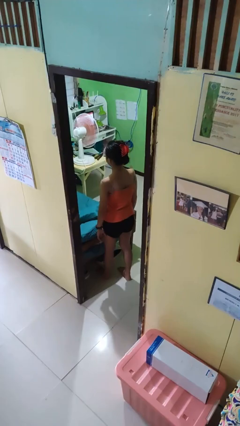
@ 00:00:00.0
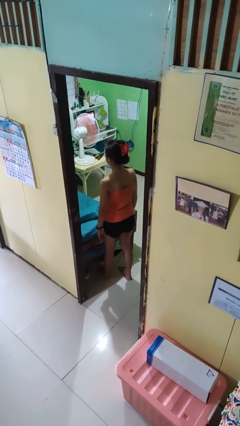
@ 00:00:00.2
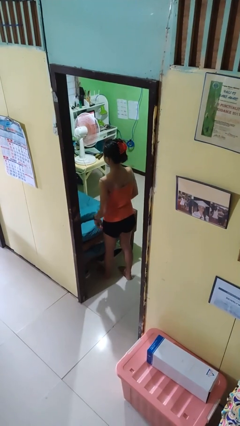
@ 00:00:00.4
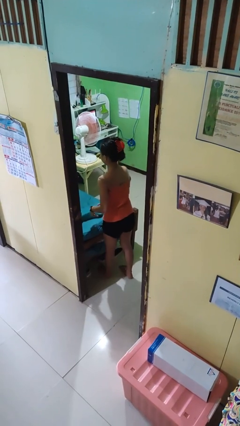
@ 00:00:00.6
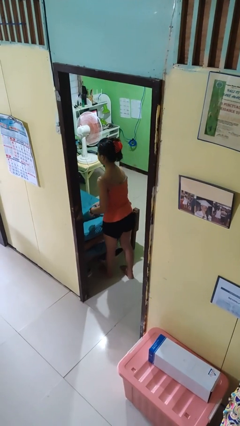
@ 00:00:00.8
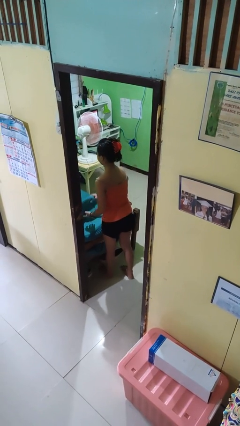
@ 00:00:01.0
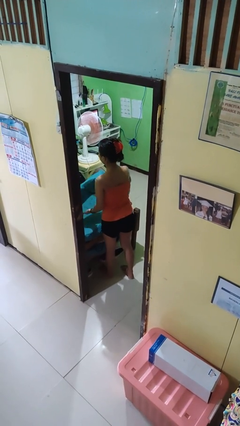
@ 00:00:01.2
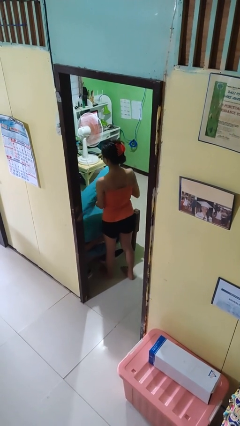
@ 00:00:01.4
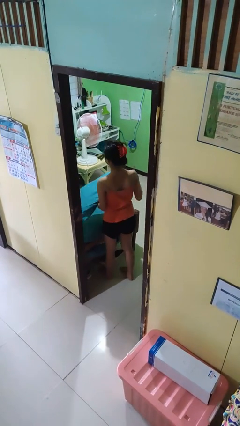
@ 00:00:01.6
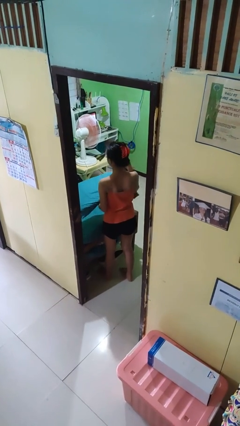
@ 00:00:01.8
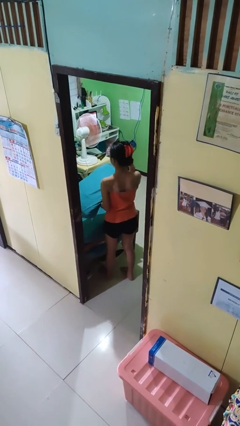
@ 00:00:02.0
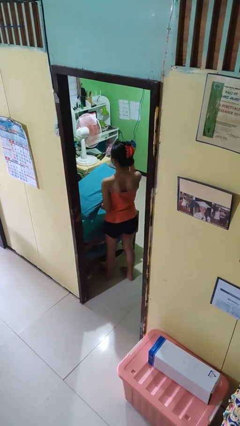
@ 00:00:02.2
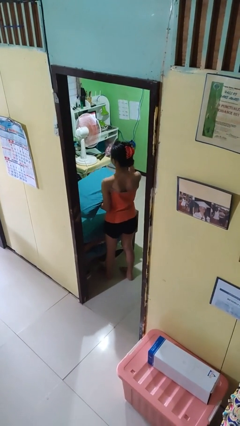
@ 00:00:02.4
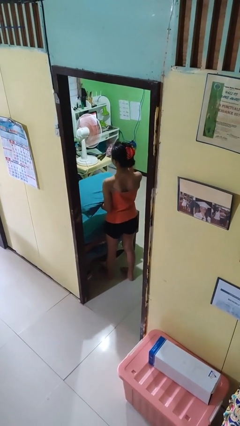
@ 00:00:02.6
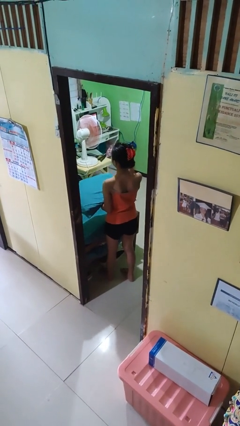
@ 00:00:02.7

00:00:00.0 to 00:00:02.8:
person picks up object from bed

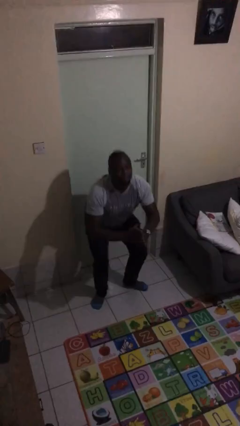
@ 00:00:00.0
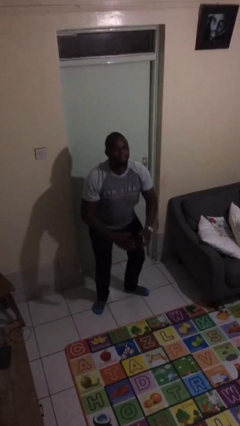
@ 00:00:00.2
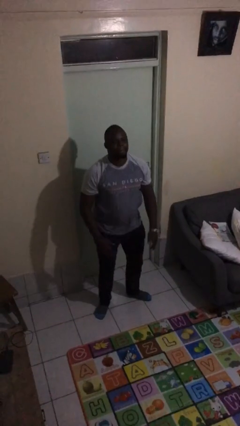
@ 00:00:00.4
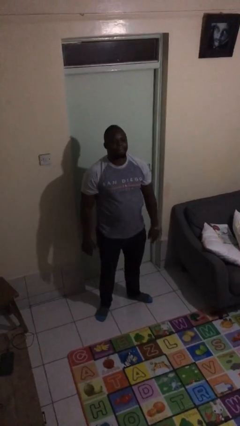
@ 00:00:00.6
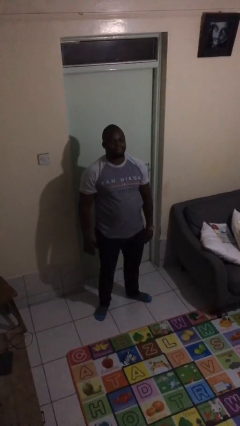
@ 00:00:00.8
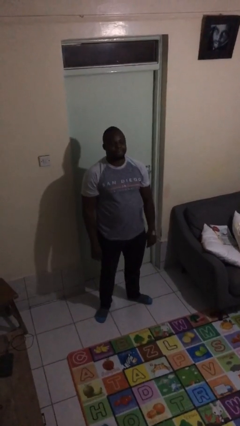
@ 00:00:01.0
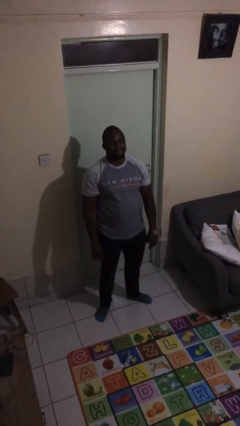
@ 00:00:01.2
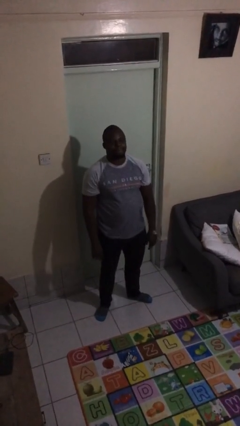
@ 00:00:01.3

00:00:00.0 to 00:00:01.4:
person stands up

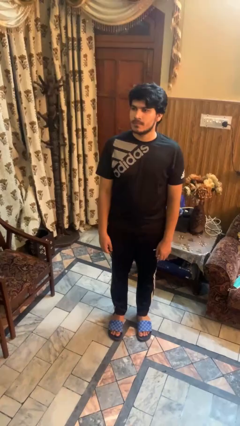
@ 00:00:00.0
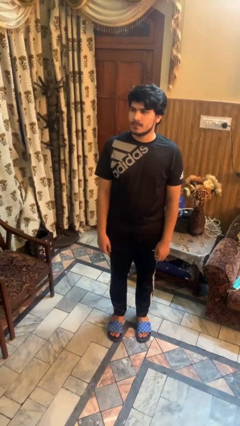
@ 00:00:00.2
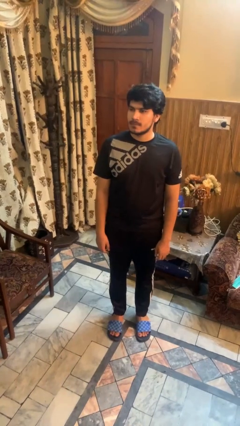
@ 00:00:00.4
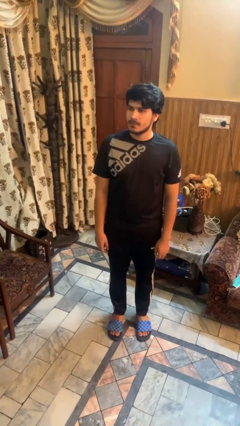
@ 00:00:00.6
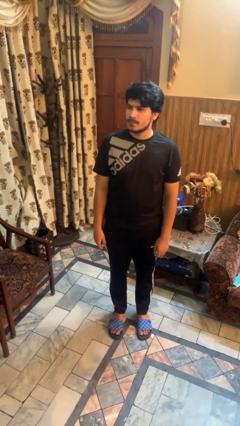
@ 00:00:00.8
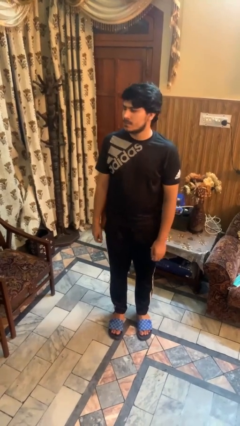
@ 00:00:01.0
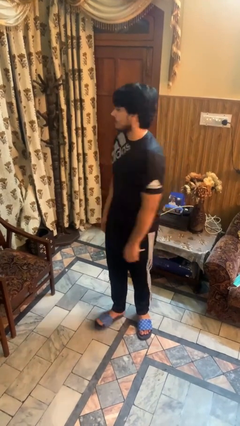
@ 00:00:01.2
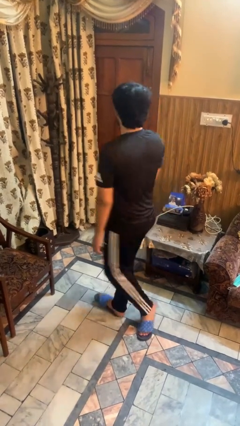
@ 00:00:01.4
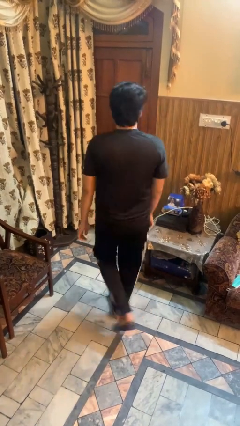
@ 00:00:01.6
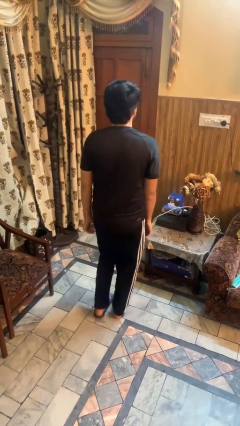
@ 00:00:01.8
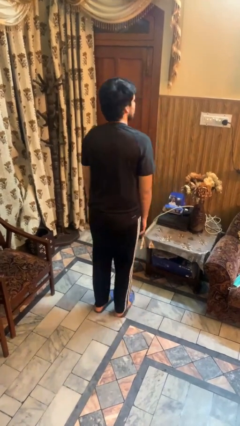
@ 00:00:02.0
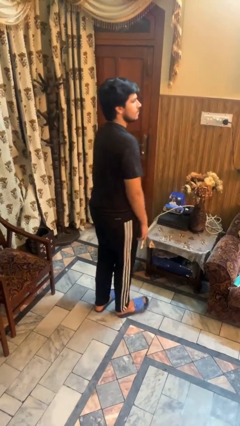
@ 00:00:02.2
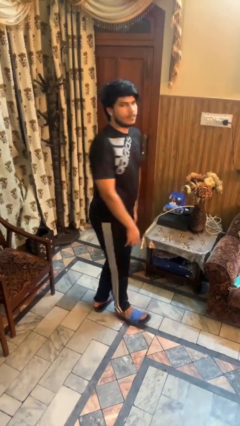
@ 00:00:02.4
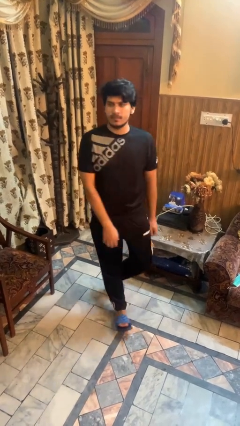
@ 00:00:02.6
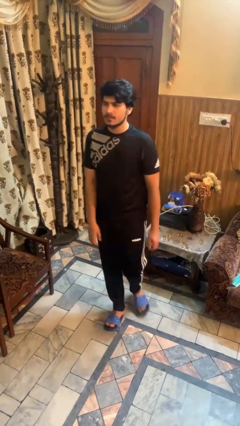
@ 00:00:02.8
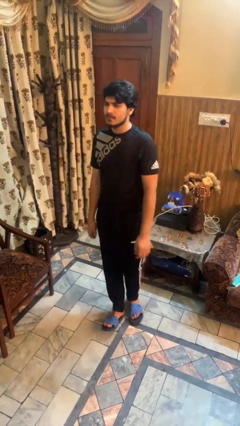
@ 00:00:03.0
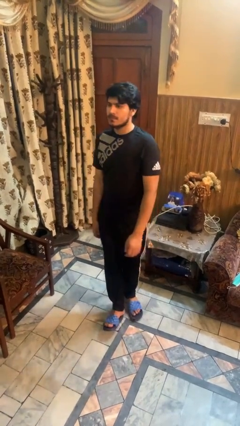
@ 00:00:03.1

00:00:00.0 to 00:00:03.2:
person twirls

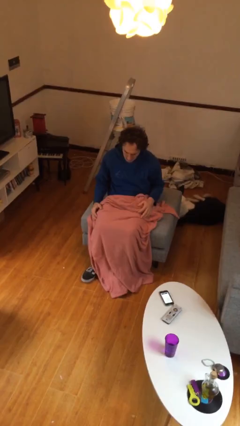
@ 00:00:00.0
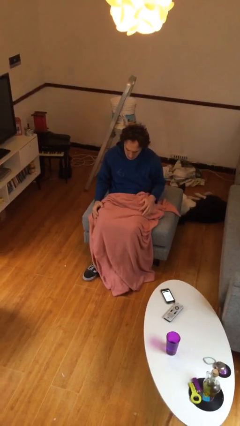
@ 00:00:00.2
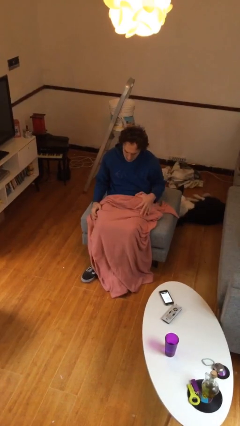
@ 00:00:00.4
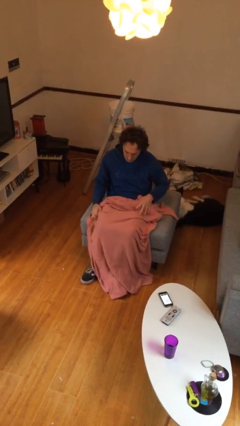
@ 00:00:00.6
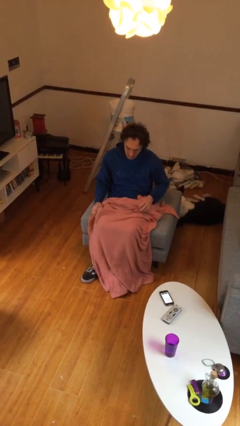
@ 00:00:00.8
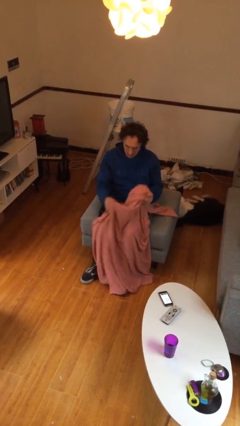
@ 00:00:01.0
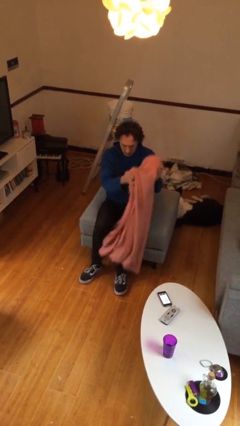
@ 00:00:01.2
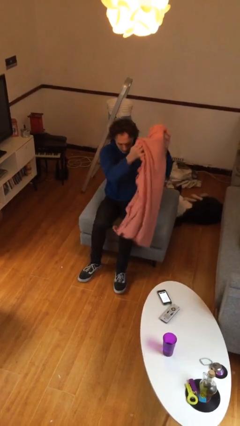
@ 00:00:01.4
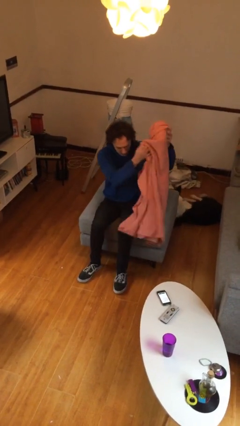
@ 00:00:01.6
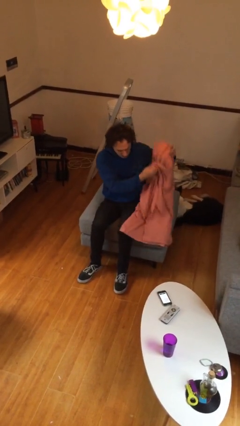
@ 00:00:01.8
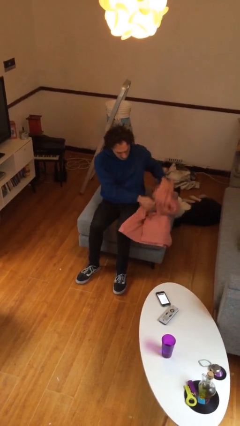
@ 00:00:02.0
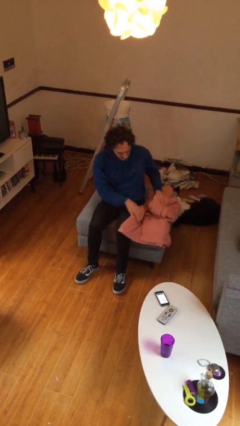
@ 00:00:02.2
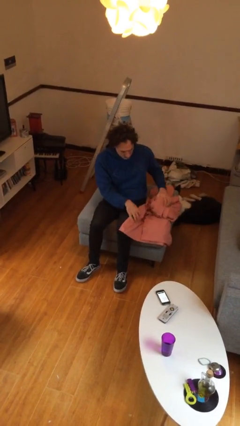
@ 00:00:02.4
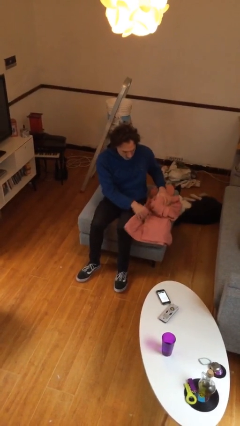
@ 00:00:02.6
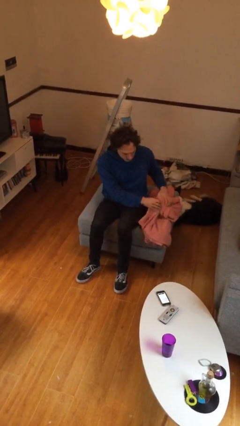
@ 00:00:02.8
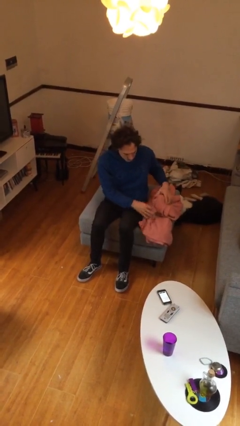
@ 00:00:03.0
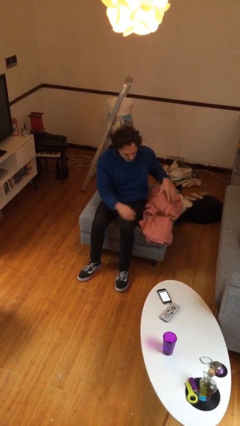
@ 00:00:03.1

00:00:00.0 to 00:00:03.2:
person uncovers with blanket

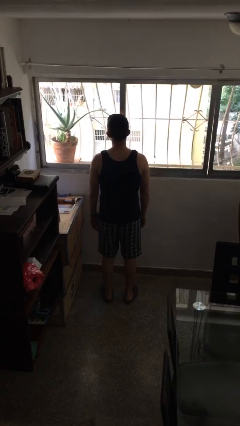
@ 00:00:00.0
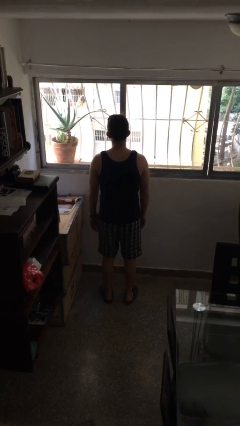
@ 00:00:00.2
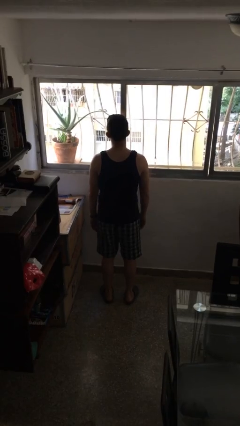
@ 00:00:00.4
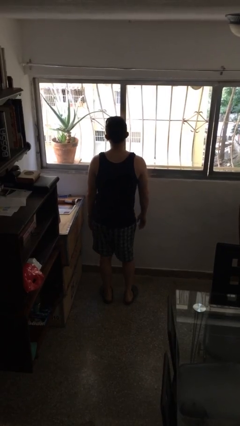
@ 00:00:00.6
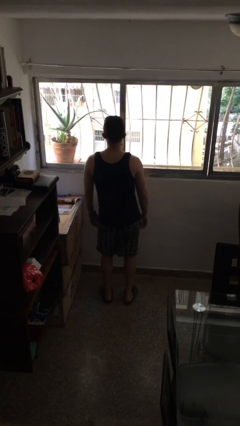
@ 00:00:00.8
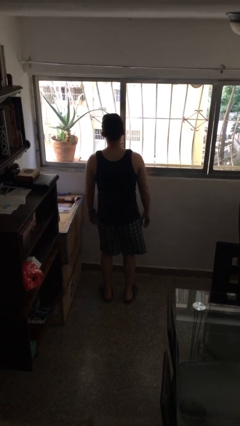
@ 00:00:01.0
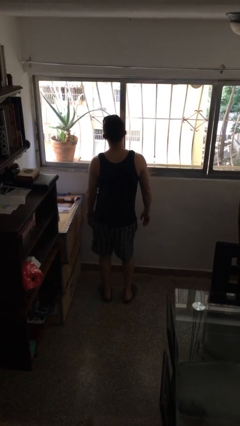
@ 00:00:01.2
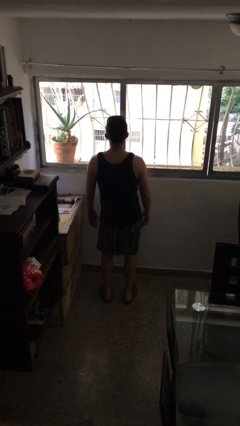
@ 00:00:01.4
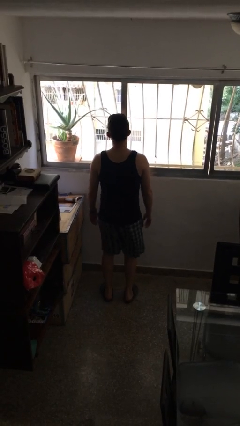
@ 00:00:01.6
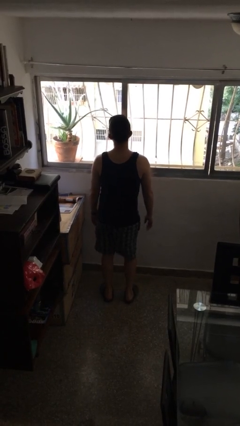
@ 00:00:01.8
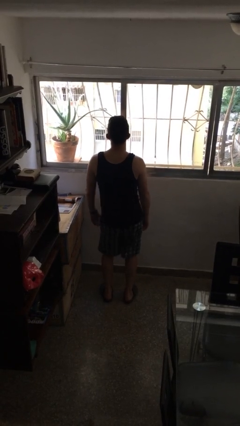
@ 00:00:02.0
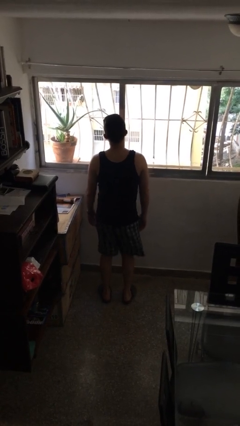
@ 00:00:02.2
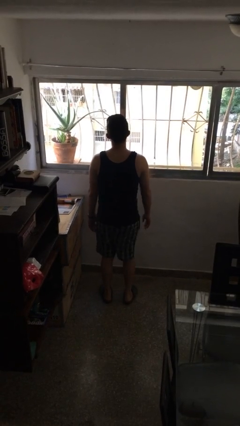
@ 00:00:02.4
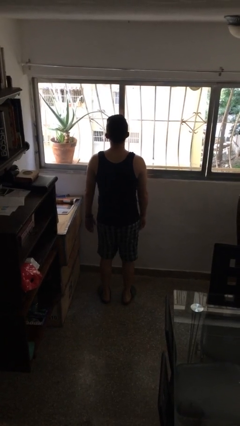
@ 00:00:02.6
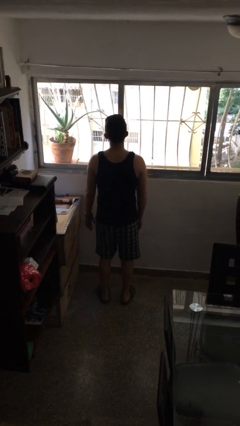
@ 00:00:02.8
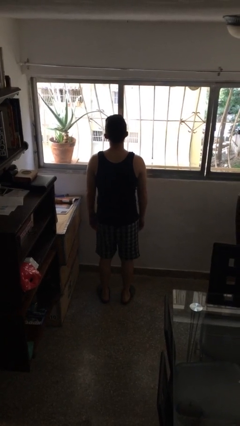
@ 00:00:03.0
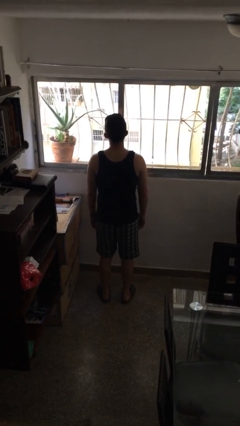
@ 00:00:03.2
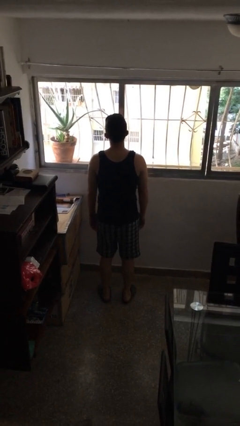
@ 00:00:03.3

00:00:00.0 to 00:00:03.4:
person wiggles hips

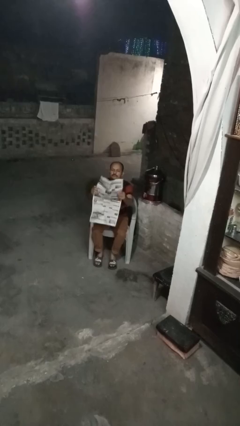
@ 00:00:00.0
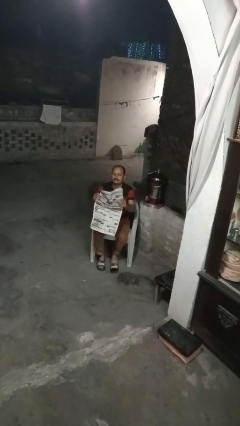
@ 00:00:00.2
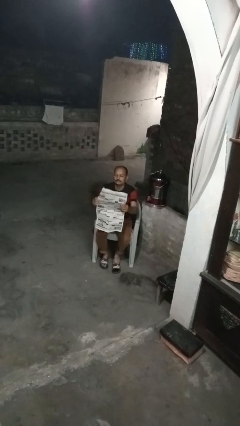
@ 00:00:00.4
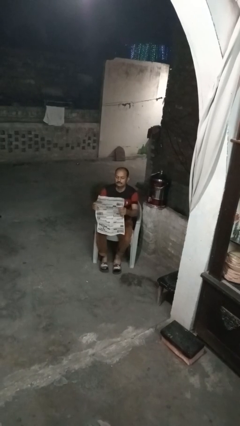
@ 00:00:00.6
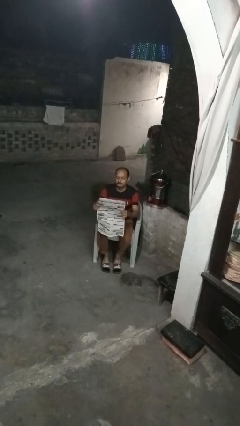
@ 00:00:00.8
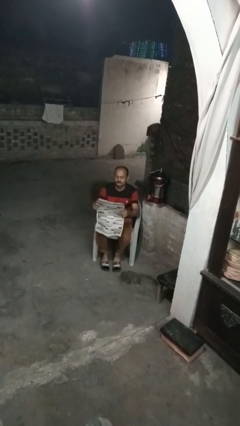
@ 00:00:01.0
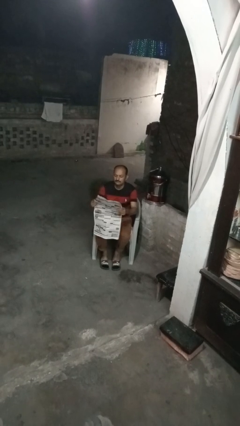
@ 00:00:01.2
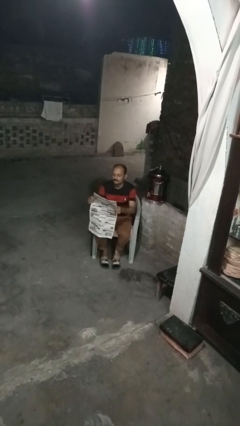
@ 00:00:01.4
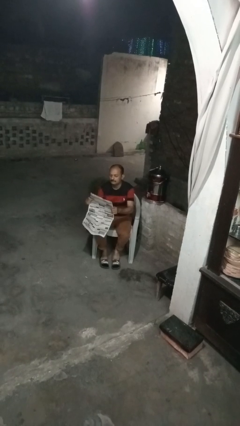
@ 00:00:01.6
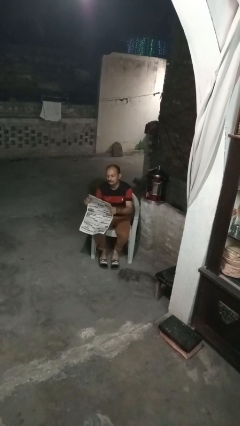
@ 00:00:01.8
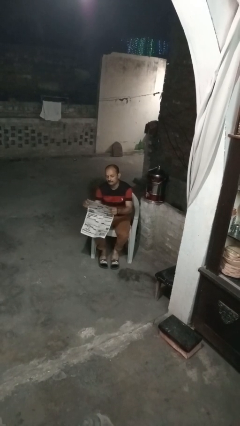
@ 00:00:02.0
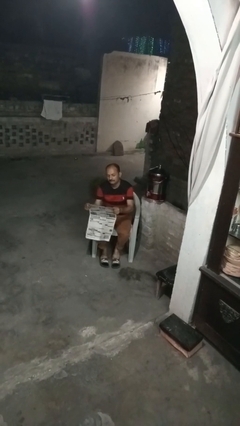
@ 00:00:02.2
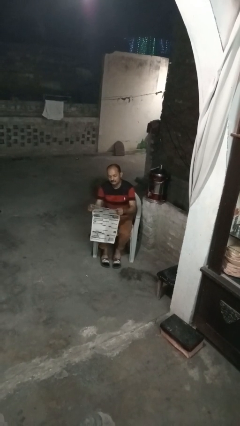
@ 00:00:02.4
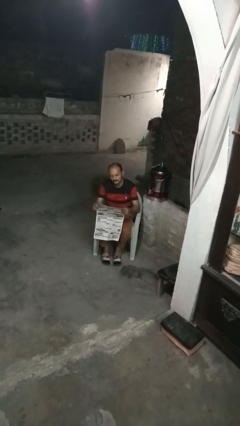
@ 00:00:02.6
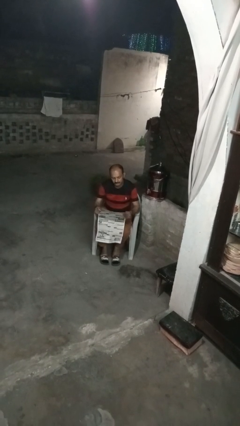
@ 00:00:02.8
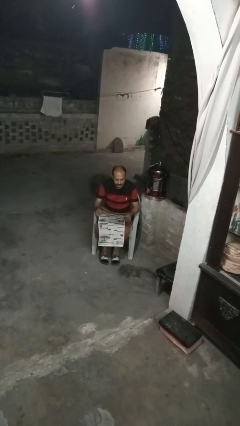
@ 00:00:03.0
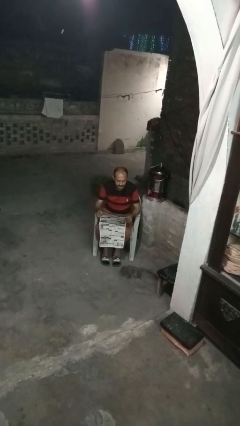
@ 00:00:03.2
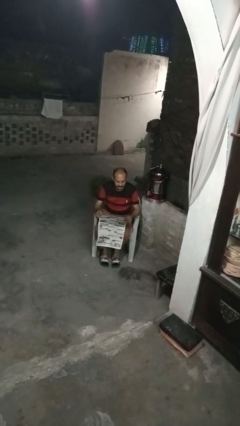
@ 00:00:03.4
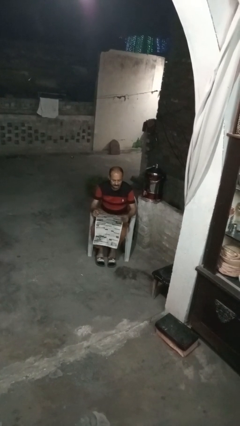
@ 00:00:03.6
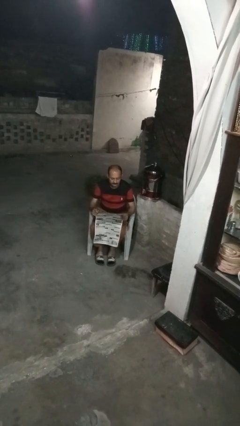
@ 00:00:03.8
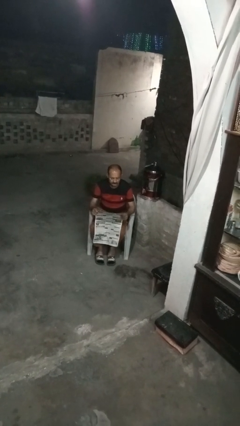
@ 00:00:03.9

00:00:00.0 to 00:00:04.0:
person reads newspaper
